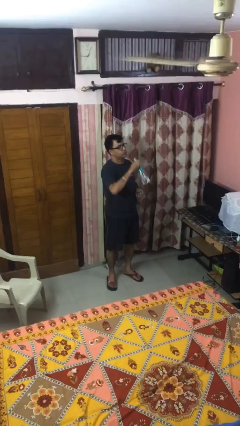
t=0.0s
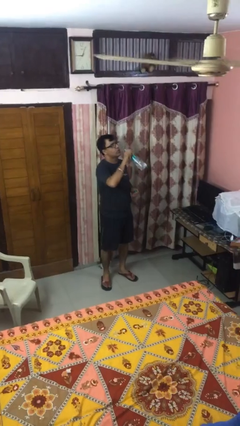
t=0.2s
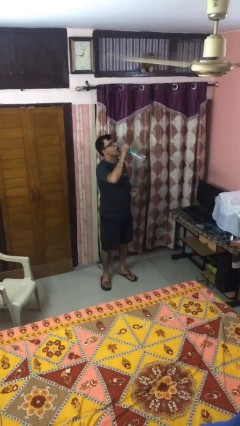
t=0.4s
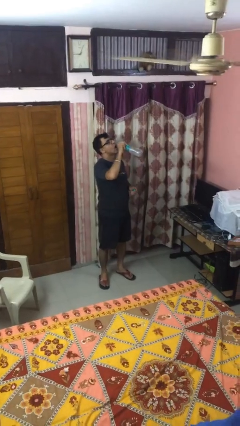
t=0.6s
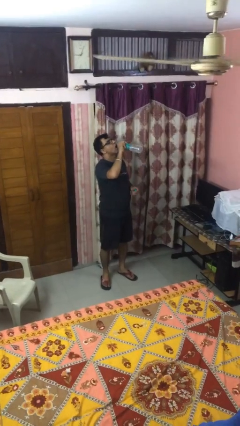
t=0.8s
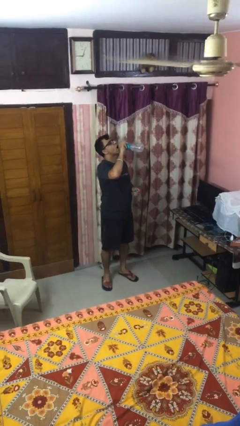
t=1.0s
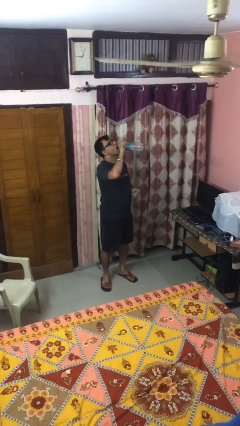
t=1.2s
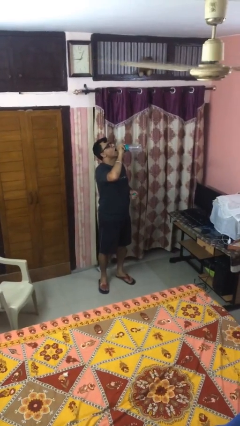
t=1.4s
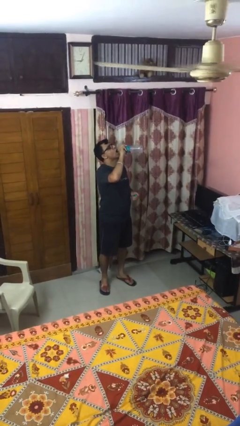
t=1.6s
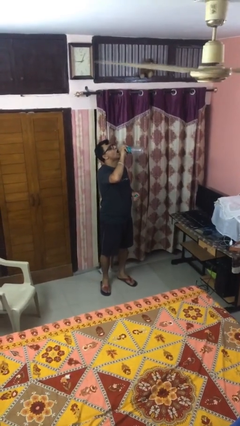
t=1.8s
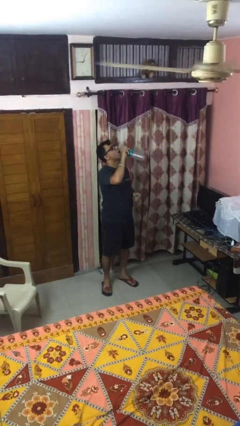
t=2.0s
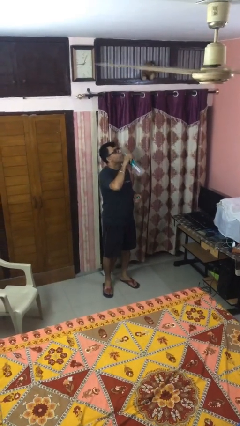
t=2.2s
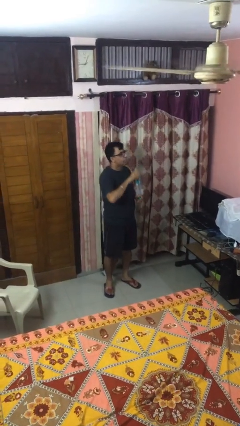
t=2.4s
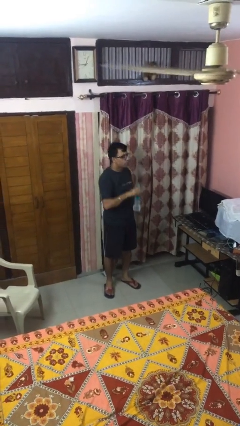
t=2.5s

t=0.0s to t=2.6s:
person drinks from bottle

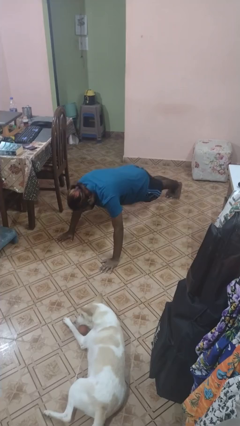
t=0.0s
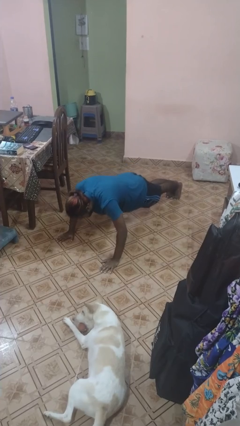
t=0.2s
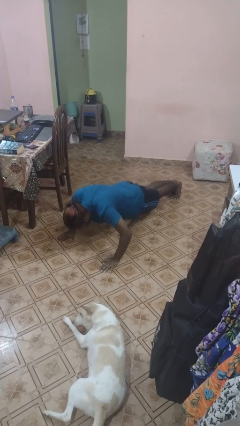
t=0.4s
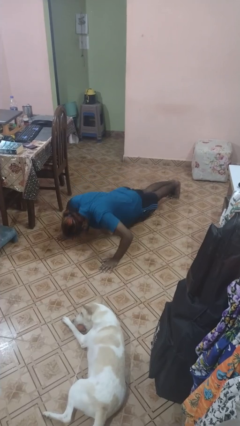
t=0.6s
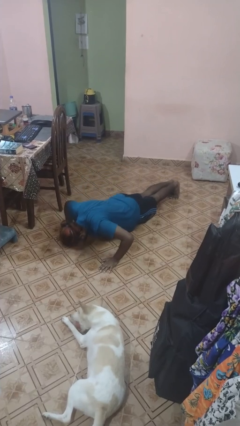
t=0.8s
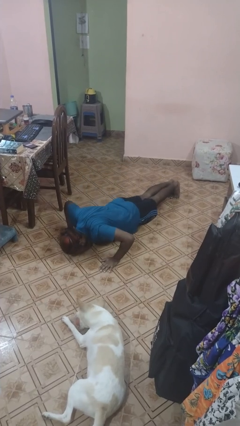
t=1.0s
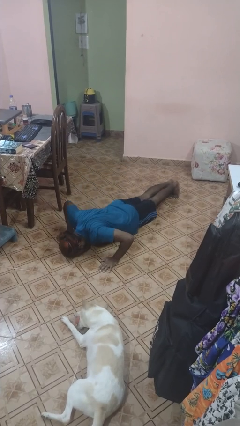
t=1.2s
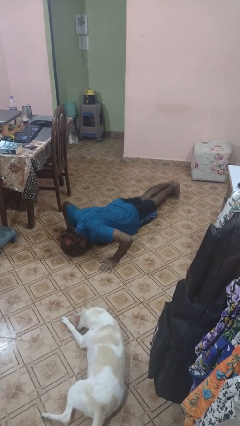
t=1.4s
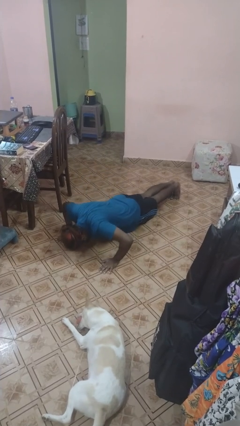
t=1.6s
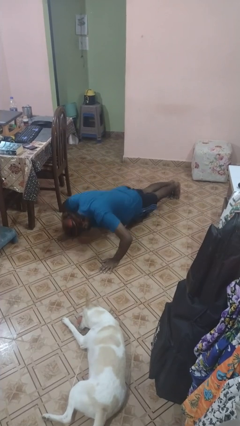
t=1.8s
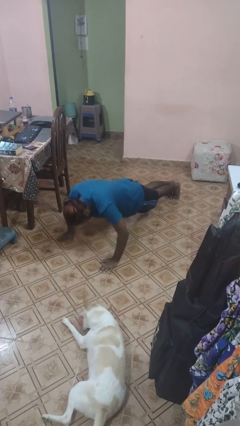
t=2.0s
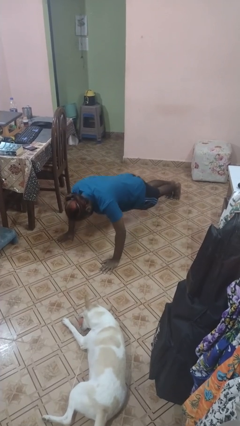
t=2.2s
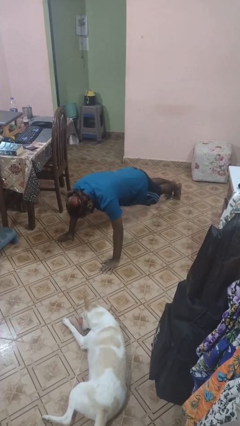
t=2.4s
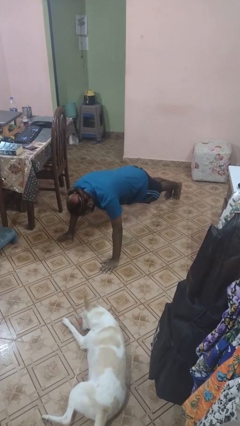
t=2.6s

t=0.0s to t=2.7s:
person exercises with pushup

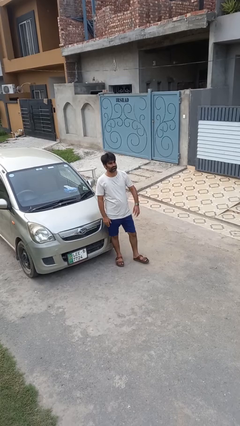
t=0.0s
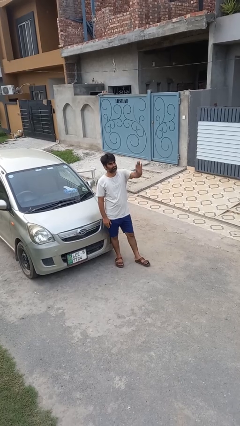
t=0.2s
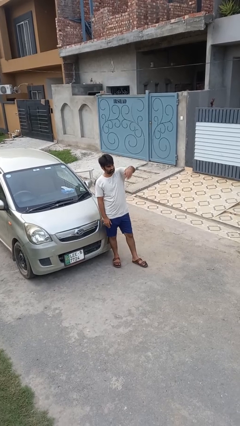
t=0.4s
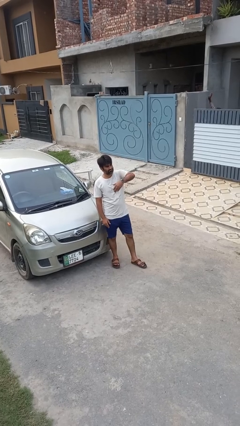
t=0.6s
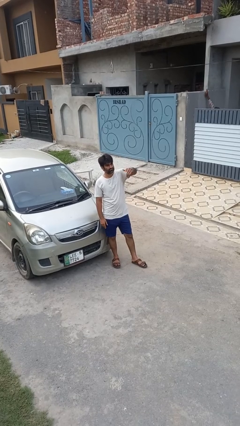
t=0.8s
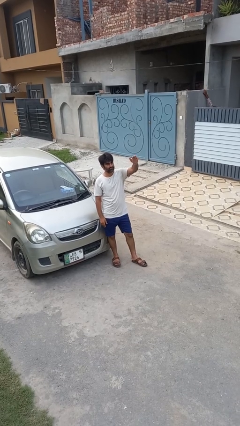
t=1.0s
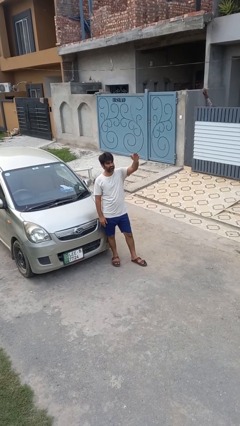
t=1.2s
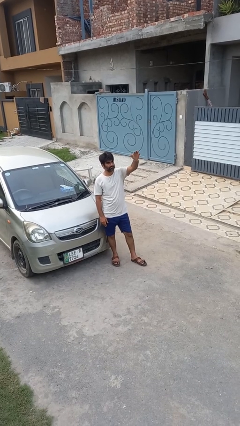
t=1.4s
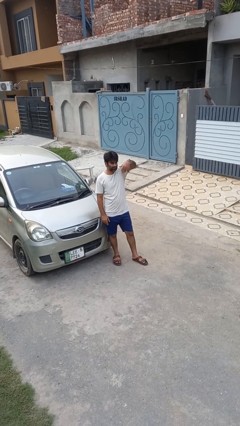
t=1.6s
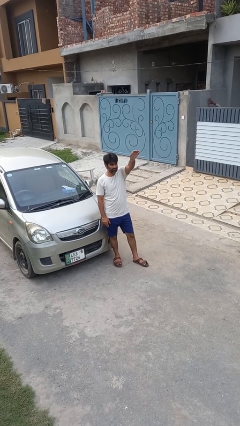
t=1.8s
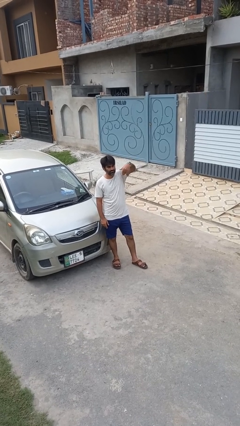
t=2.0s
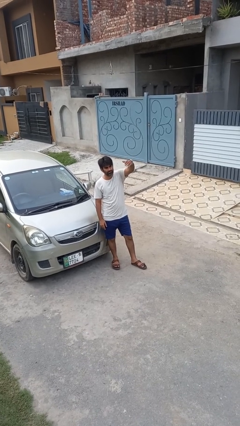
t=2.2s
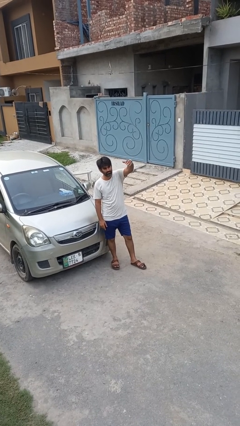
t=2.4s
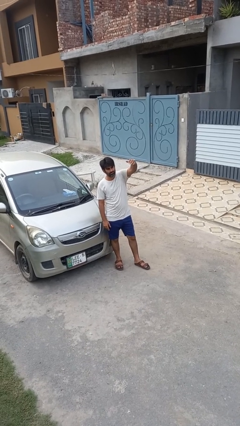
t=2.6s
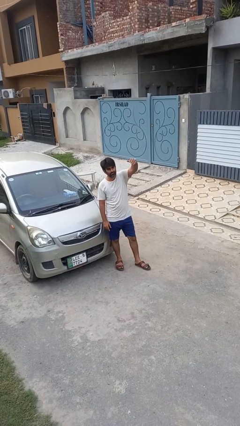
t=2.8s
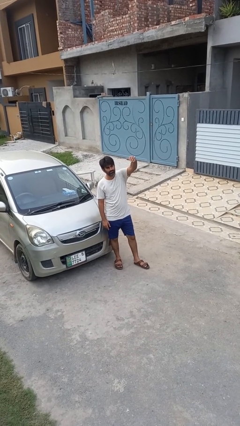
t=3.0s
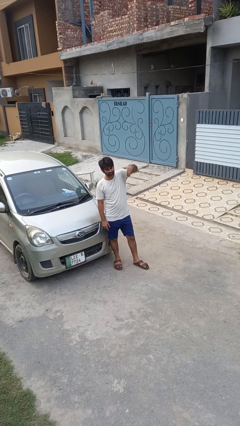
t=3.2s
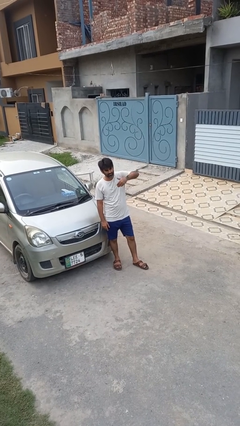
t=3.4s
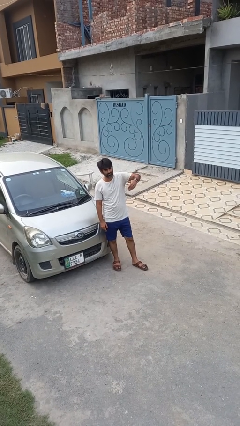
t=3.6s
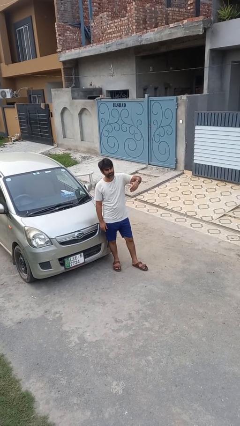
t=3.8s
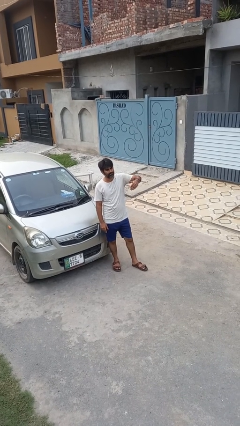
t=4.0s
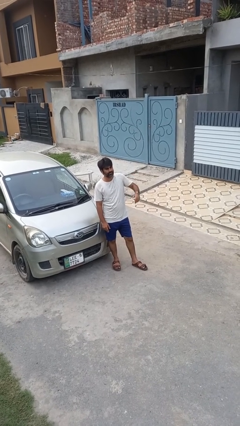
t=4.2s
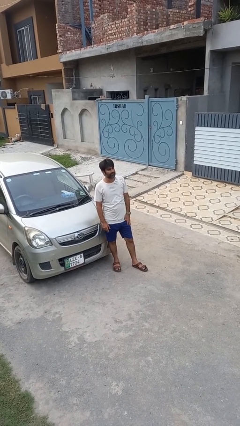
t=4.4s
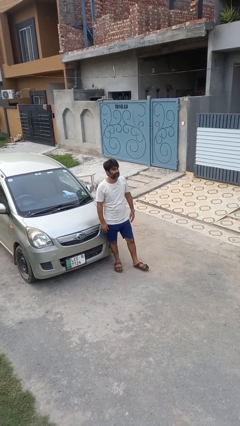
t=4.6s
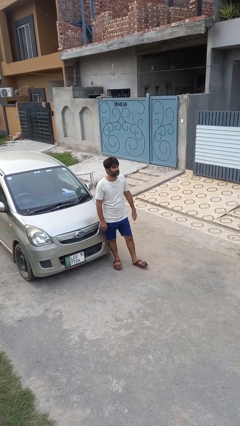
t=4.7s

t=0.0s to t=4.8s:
person gestures come here

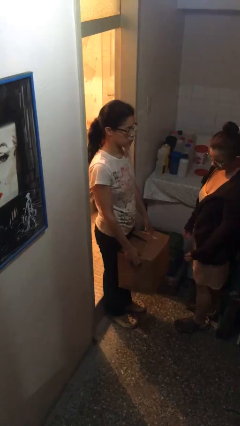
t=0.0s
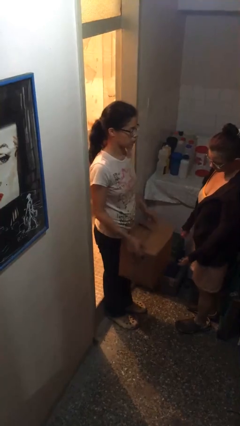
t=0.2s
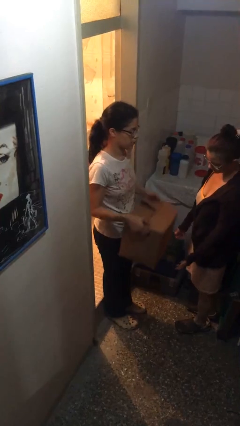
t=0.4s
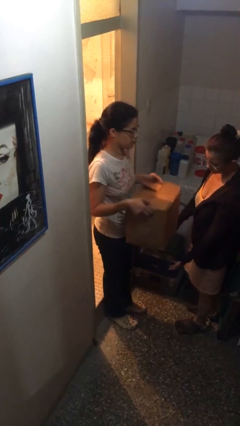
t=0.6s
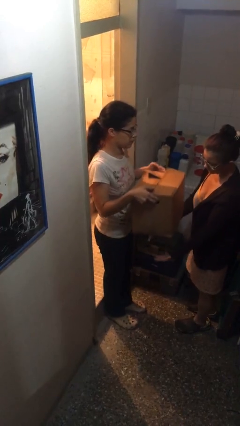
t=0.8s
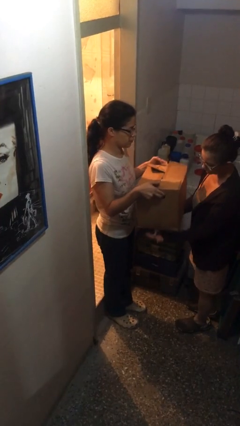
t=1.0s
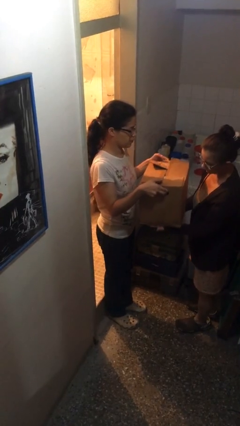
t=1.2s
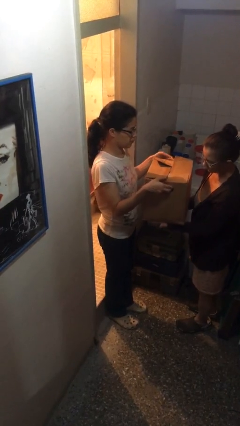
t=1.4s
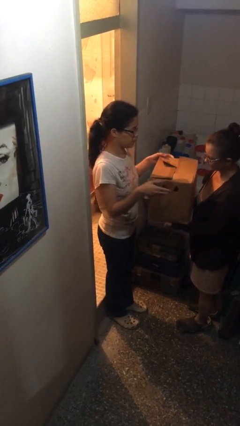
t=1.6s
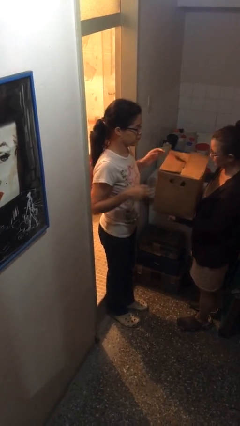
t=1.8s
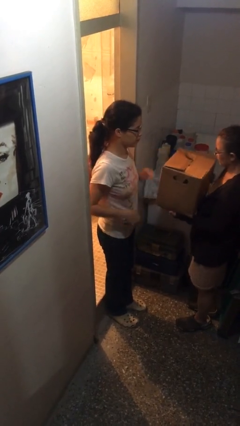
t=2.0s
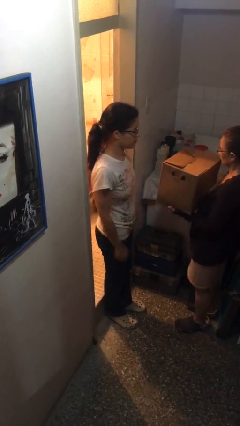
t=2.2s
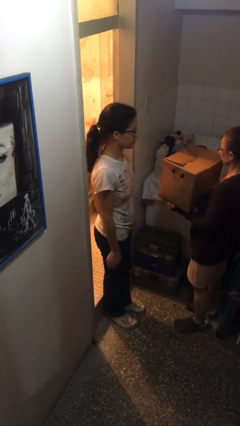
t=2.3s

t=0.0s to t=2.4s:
person transfers object to person

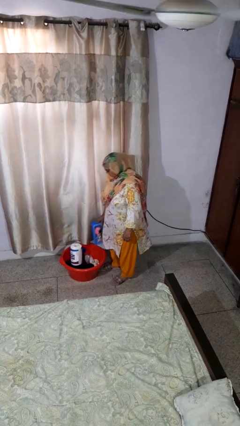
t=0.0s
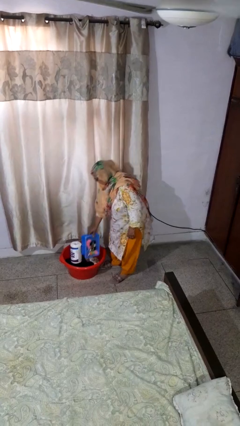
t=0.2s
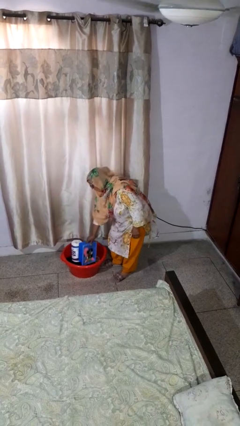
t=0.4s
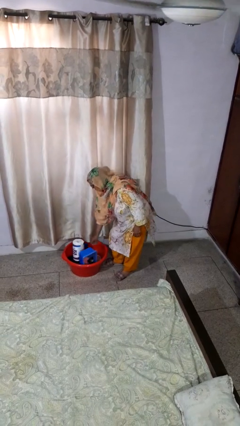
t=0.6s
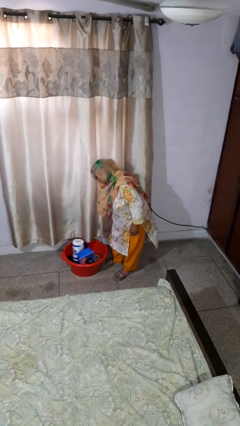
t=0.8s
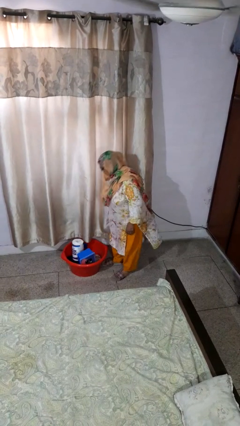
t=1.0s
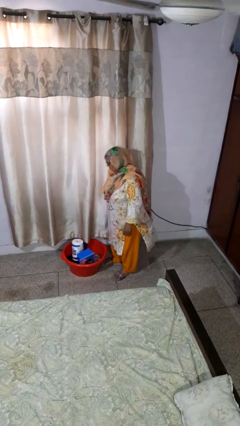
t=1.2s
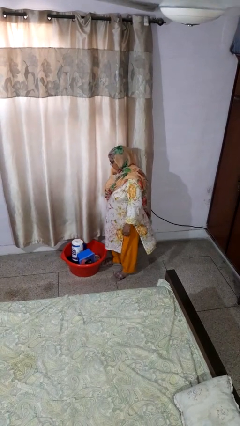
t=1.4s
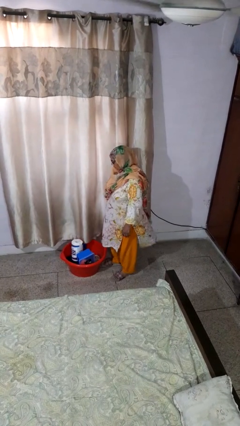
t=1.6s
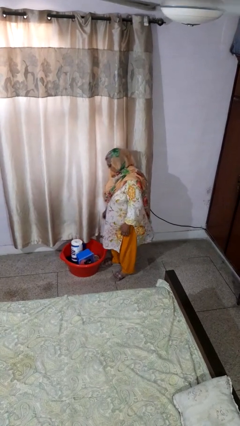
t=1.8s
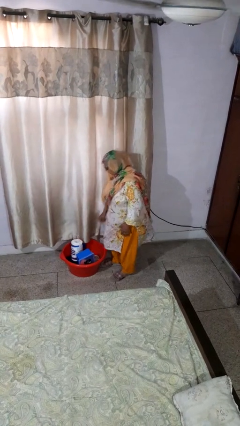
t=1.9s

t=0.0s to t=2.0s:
person puts object into basket

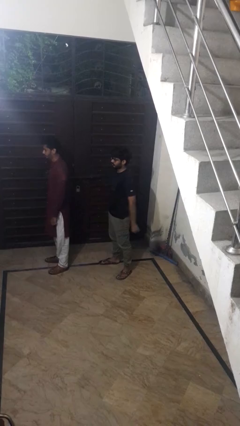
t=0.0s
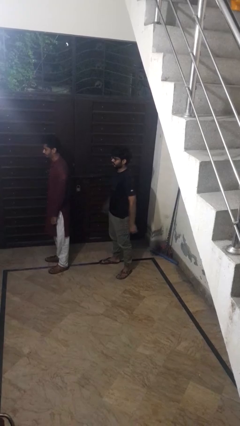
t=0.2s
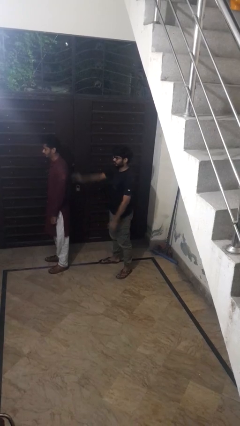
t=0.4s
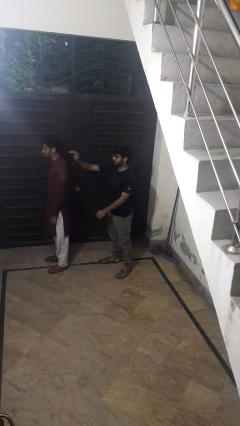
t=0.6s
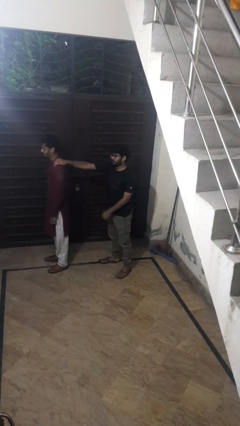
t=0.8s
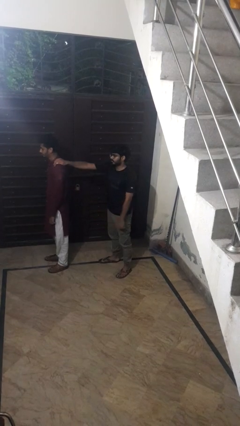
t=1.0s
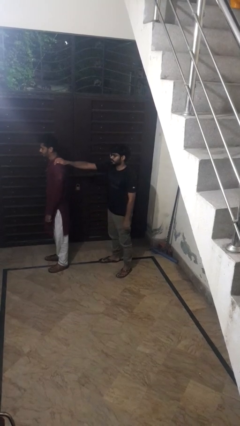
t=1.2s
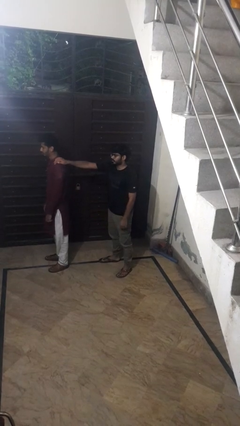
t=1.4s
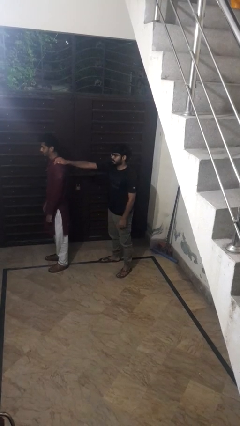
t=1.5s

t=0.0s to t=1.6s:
person grabs person by shoulder

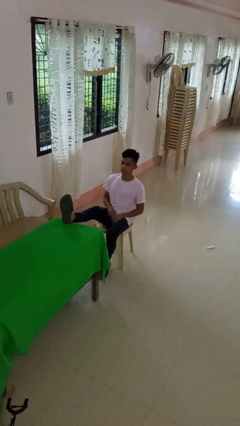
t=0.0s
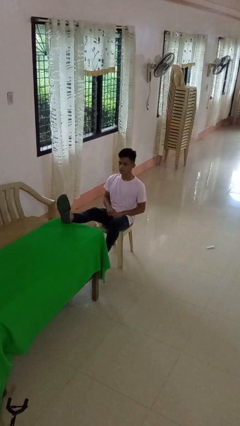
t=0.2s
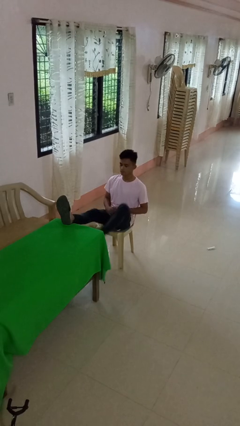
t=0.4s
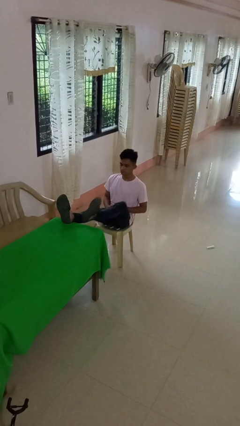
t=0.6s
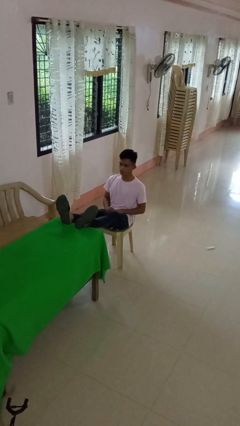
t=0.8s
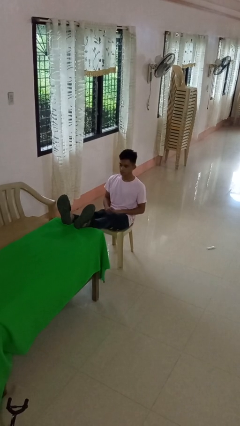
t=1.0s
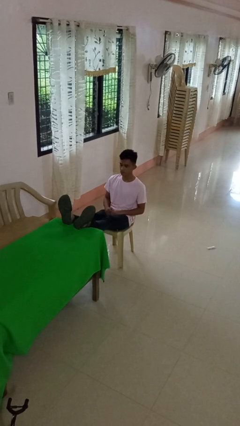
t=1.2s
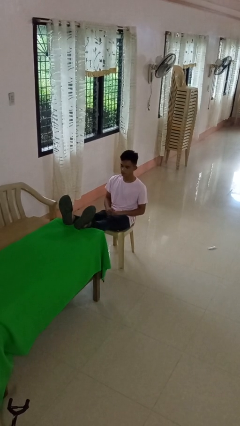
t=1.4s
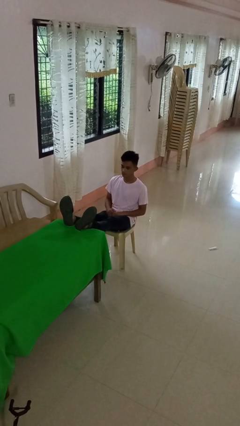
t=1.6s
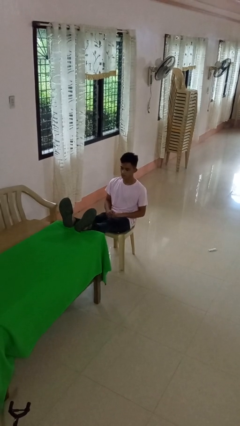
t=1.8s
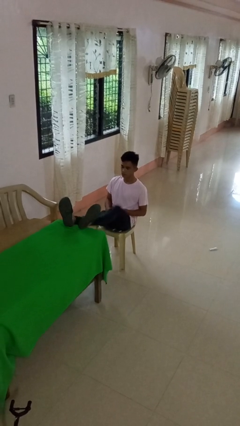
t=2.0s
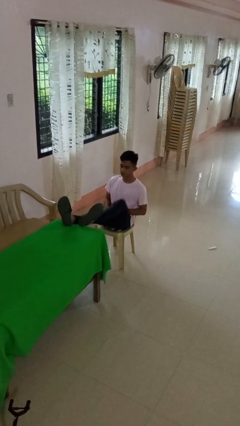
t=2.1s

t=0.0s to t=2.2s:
person puts feet up
